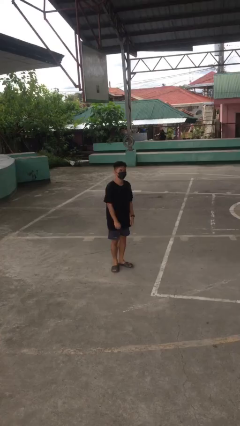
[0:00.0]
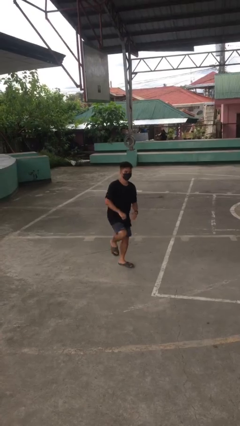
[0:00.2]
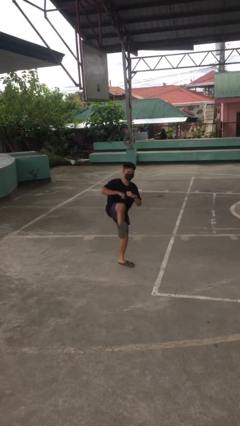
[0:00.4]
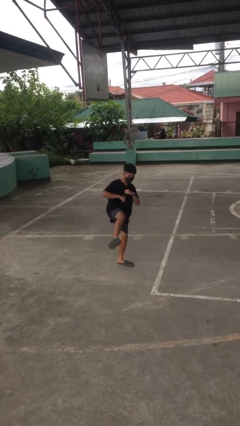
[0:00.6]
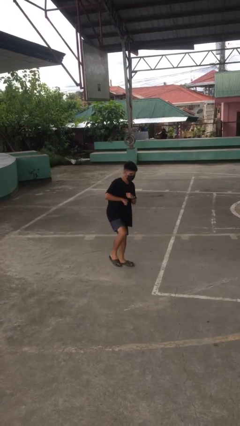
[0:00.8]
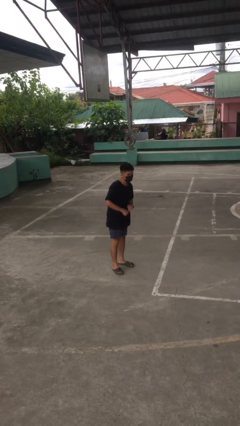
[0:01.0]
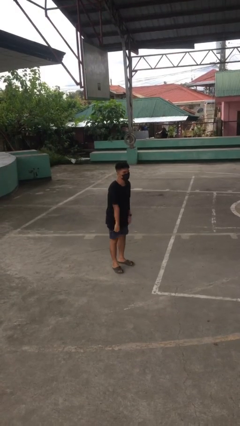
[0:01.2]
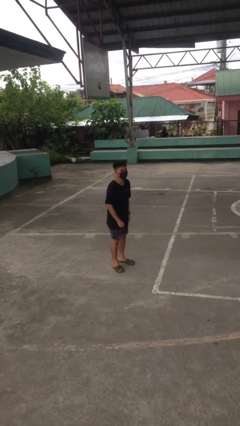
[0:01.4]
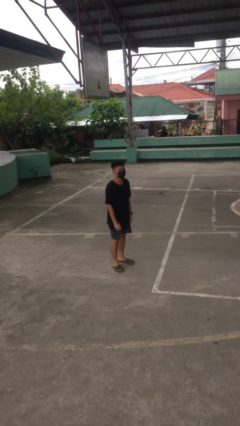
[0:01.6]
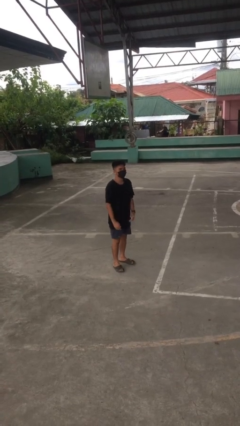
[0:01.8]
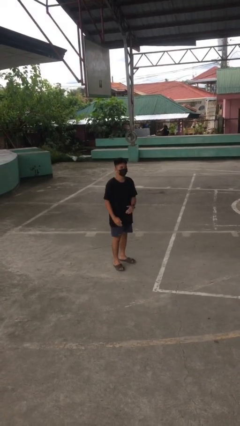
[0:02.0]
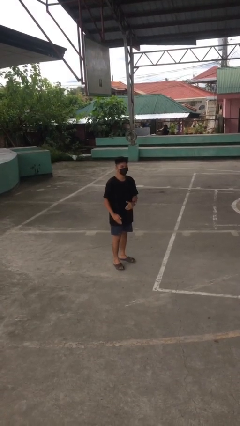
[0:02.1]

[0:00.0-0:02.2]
person karate kicks

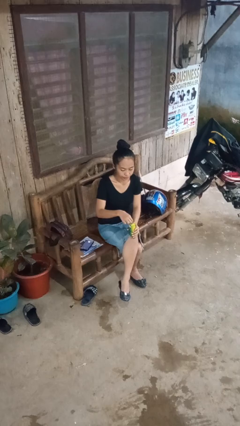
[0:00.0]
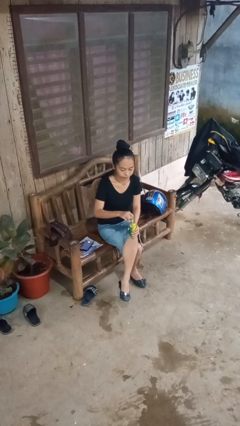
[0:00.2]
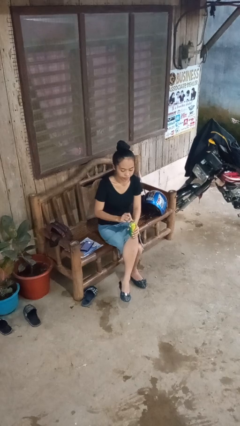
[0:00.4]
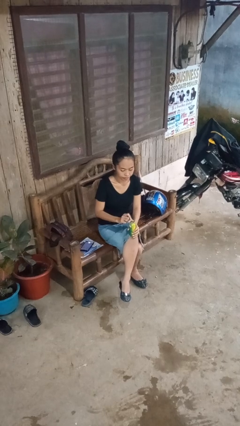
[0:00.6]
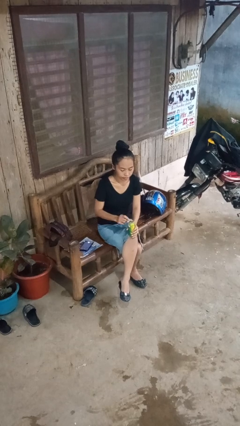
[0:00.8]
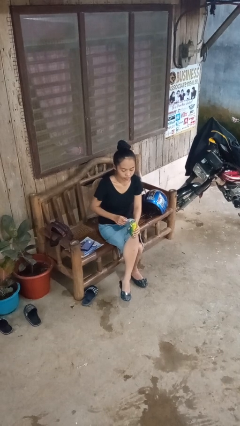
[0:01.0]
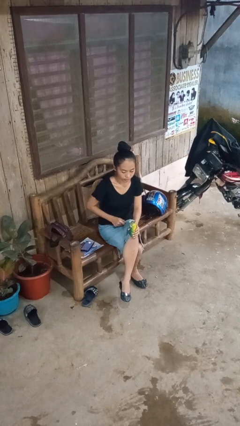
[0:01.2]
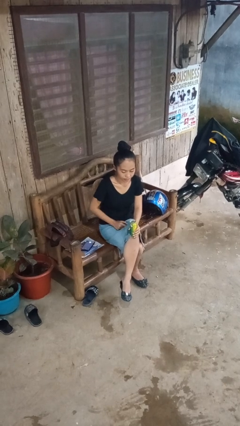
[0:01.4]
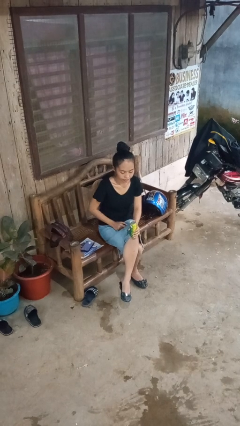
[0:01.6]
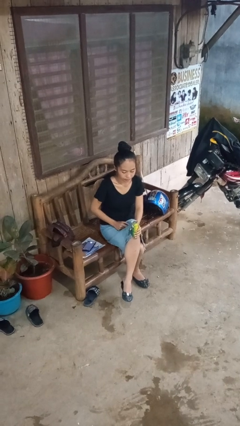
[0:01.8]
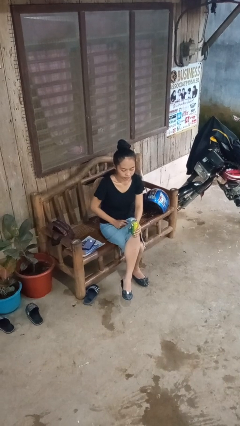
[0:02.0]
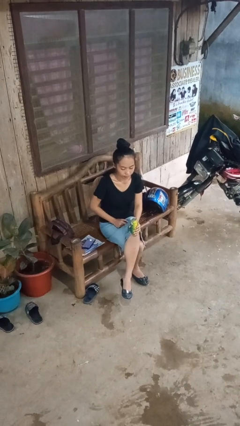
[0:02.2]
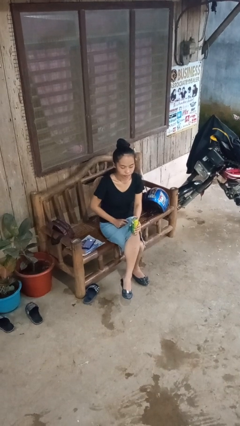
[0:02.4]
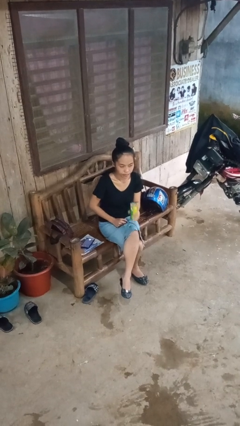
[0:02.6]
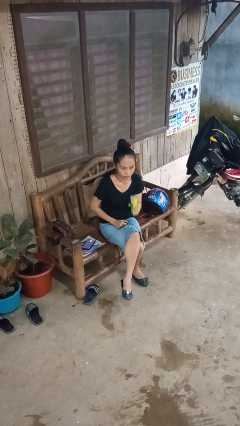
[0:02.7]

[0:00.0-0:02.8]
person opens beverage can

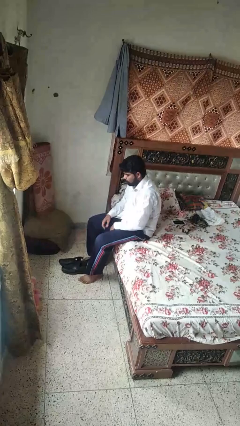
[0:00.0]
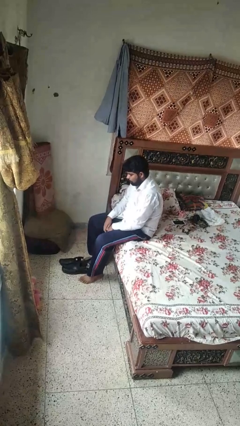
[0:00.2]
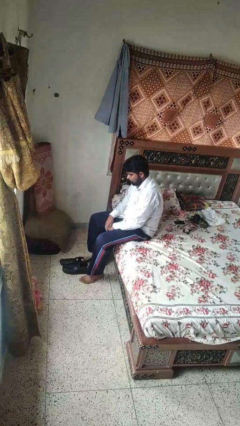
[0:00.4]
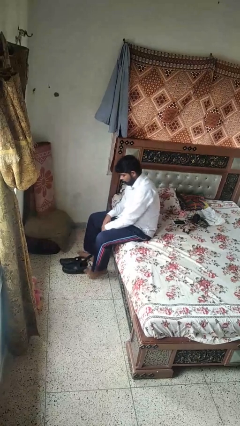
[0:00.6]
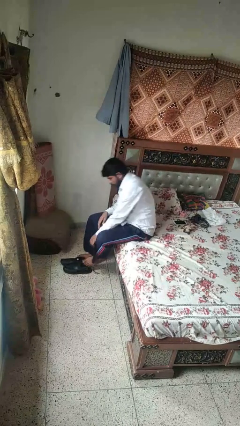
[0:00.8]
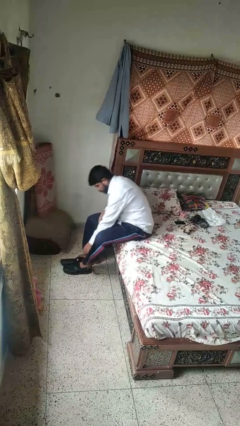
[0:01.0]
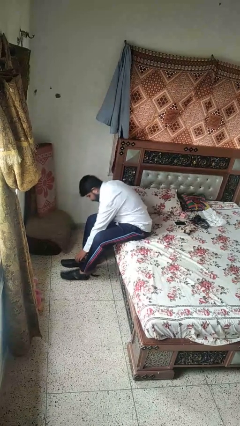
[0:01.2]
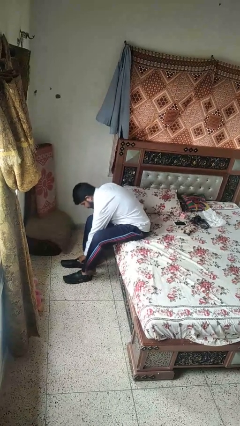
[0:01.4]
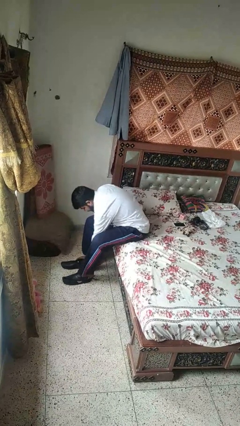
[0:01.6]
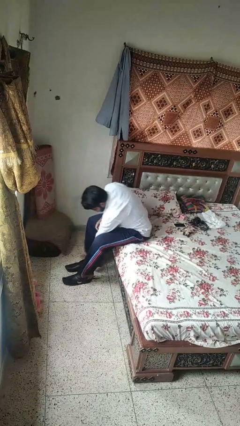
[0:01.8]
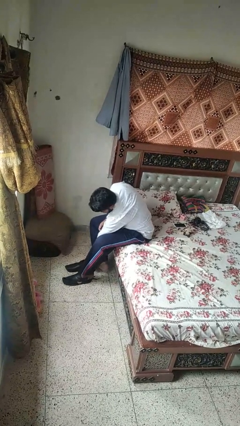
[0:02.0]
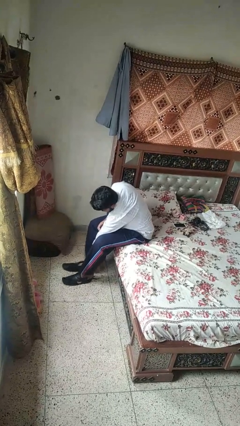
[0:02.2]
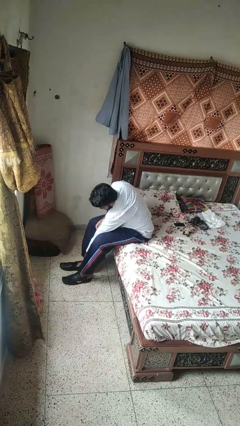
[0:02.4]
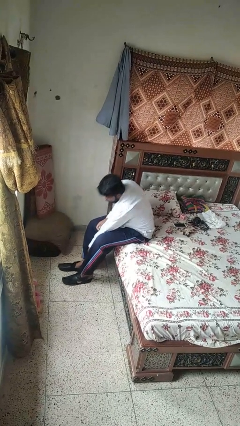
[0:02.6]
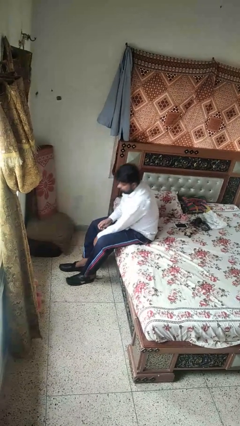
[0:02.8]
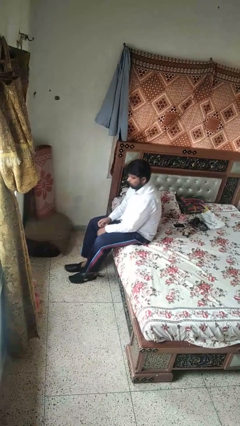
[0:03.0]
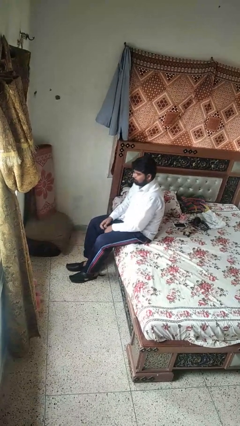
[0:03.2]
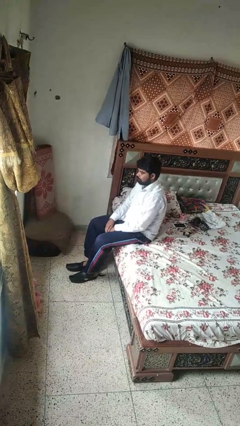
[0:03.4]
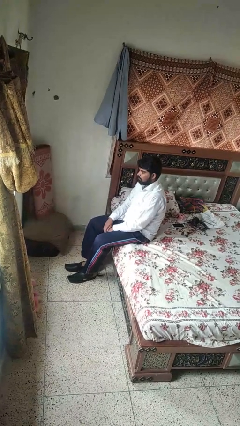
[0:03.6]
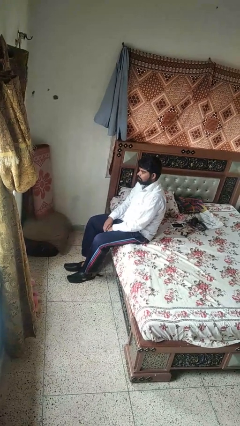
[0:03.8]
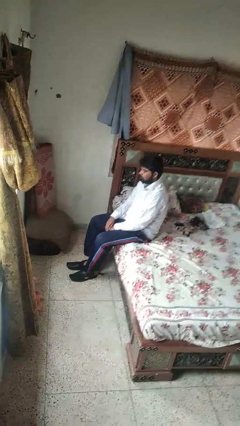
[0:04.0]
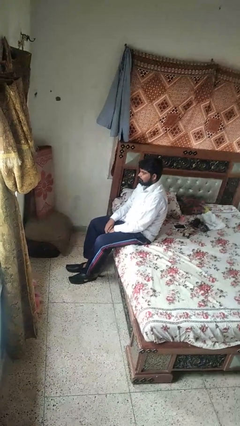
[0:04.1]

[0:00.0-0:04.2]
person puts on shoes

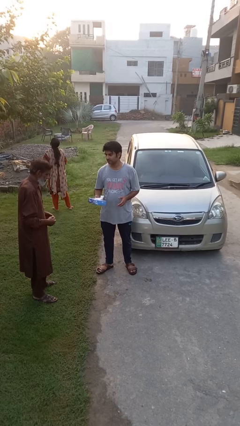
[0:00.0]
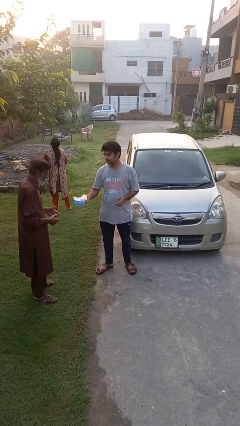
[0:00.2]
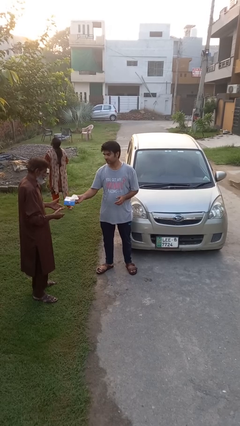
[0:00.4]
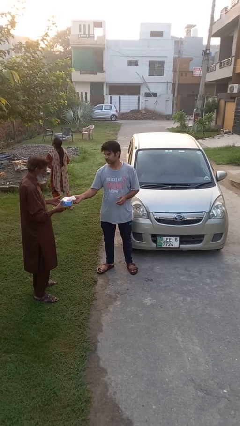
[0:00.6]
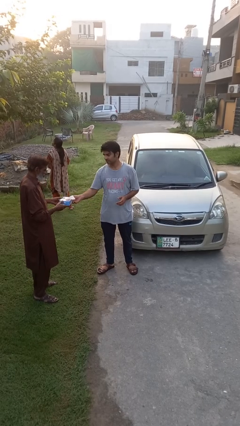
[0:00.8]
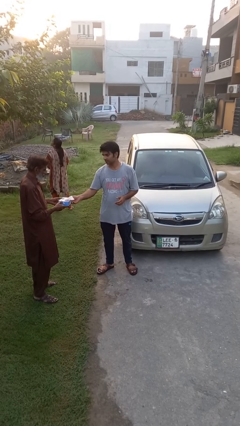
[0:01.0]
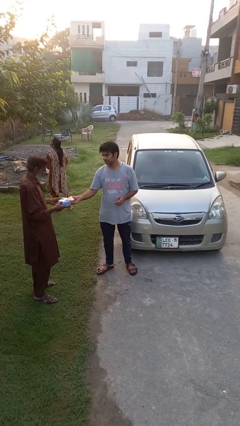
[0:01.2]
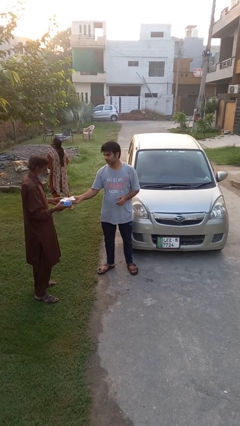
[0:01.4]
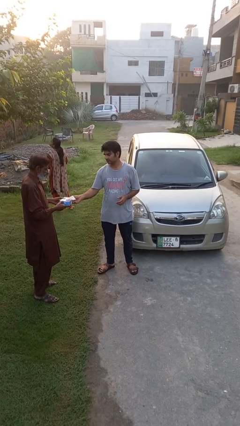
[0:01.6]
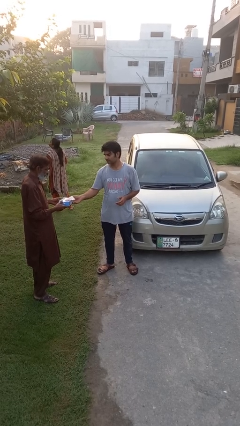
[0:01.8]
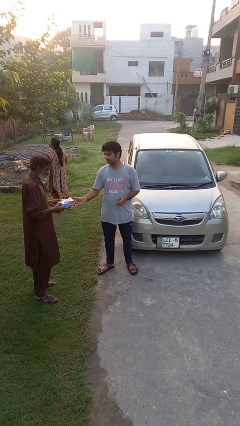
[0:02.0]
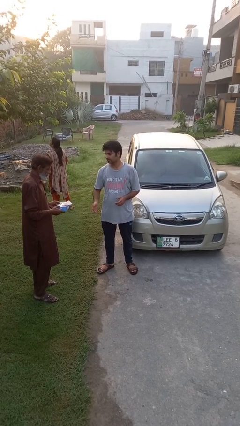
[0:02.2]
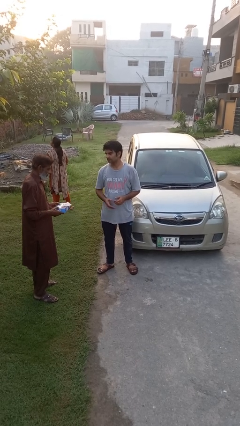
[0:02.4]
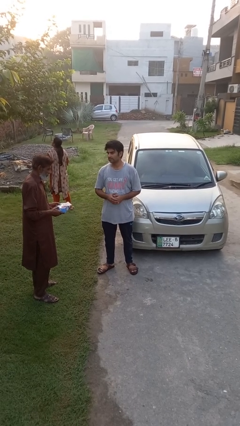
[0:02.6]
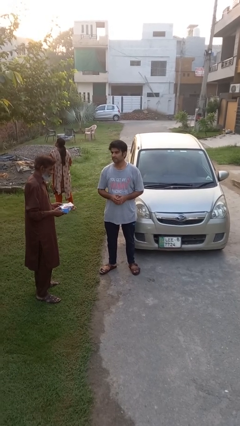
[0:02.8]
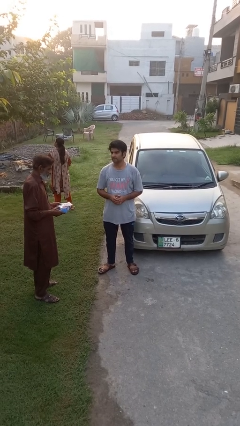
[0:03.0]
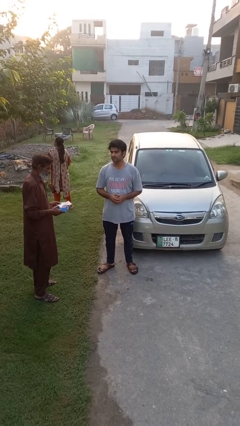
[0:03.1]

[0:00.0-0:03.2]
person transfers object to person

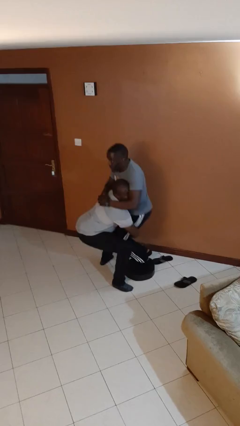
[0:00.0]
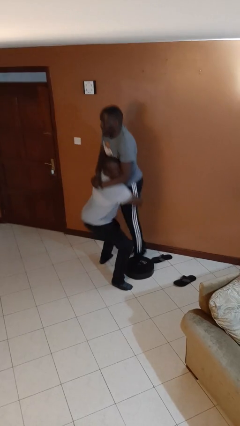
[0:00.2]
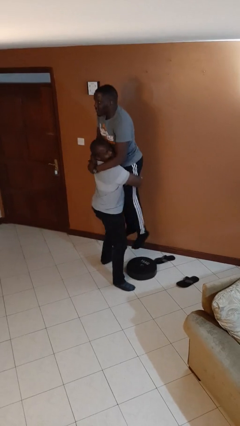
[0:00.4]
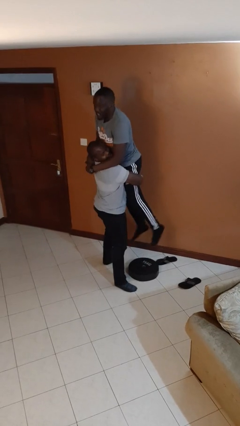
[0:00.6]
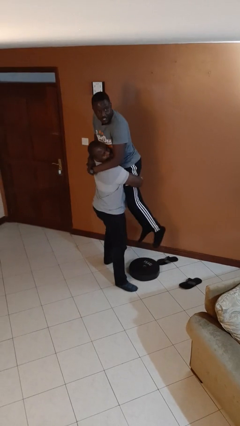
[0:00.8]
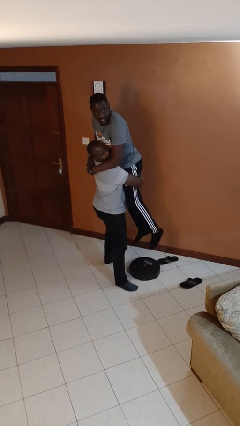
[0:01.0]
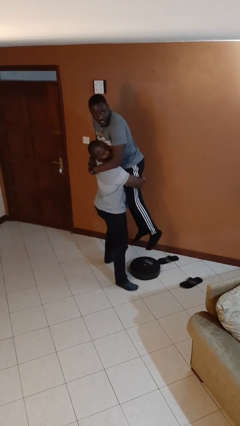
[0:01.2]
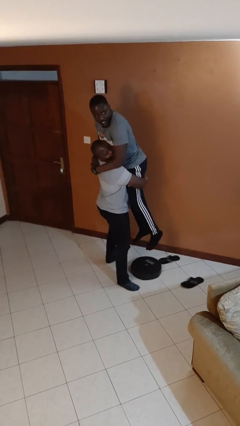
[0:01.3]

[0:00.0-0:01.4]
person picks up person

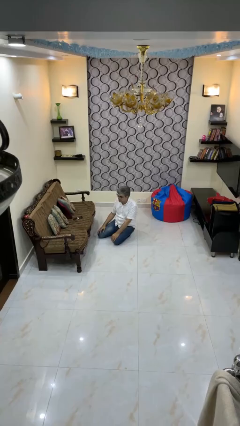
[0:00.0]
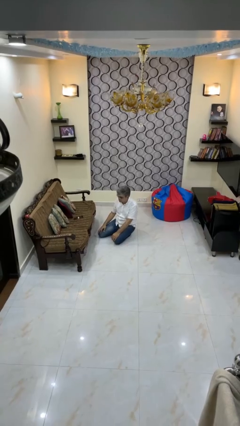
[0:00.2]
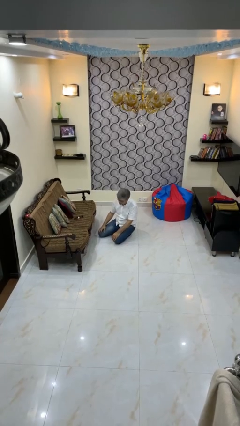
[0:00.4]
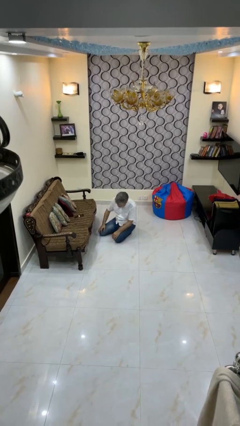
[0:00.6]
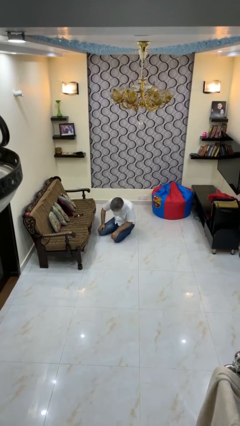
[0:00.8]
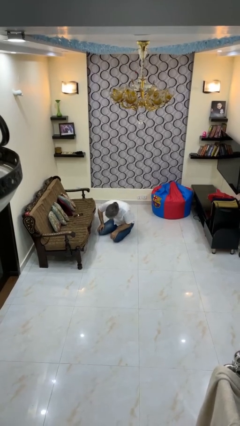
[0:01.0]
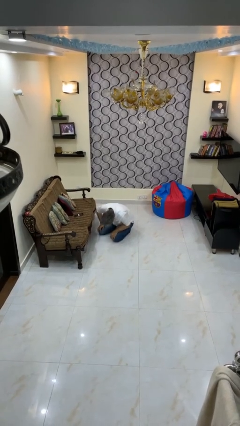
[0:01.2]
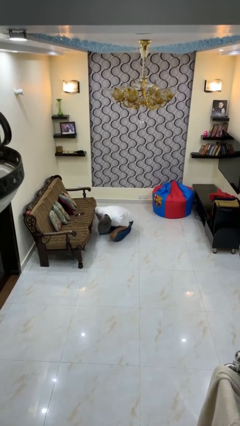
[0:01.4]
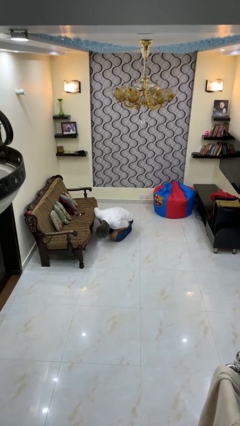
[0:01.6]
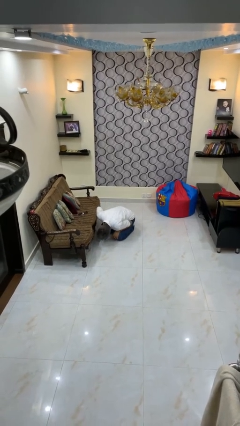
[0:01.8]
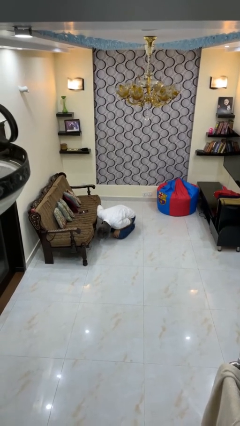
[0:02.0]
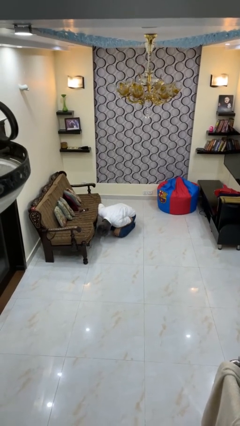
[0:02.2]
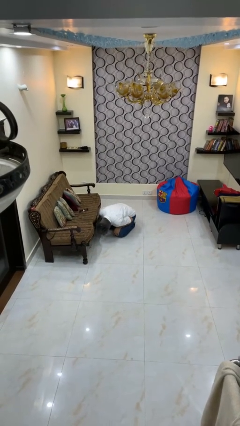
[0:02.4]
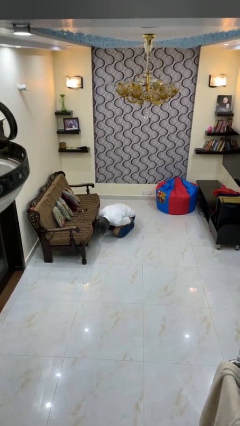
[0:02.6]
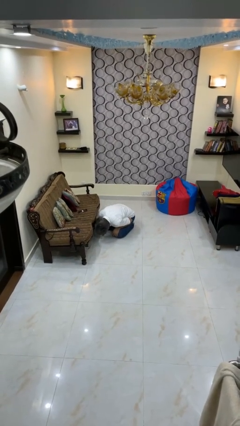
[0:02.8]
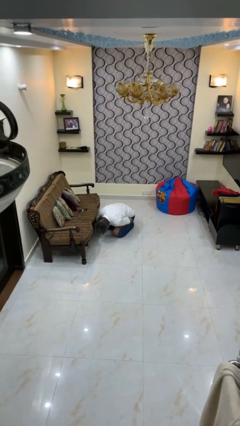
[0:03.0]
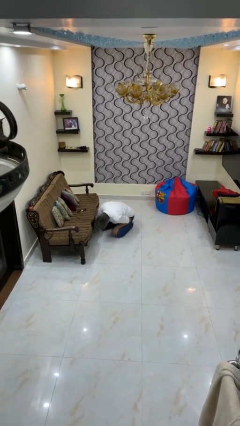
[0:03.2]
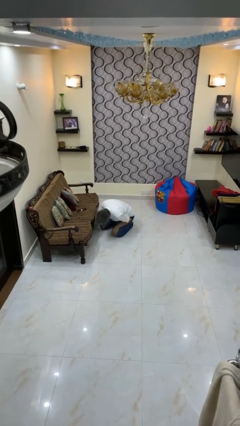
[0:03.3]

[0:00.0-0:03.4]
person searches under couch

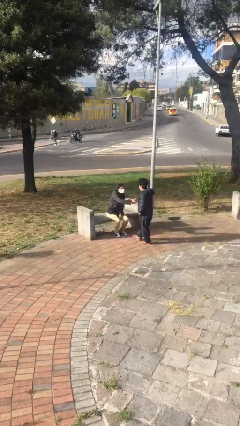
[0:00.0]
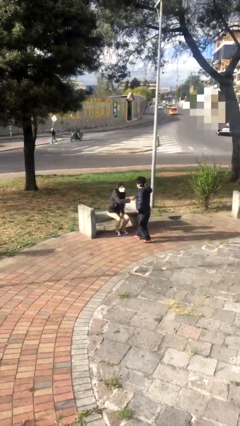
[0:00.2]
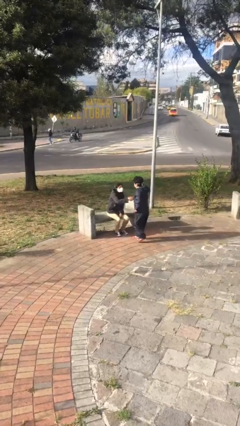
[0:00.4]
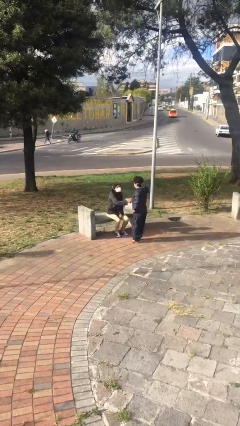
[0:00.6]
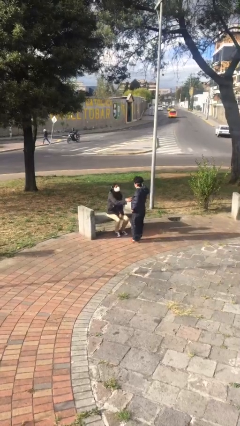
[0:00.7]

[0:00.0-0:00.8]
person shakes hand
